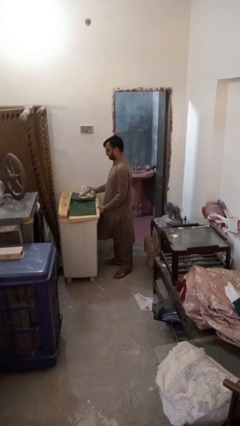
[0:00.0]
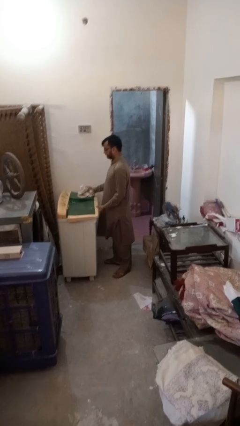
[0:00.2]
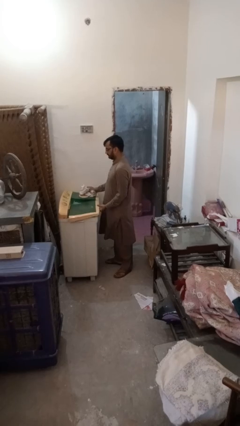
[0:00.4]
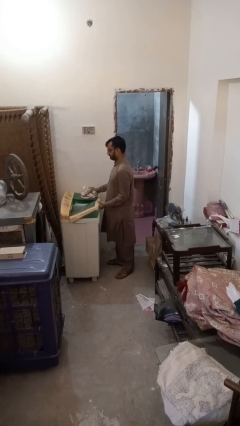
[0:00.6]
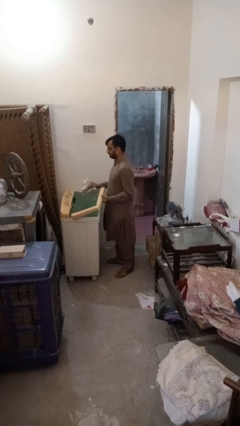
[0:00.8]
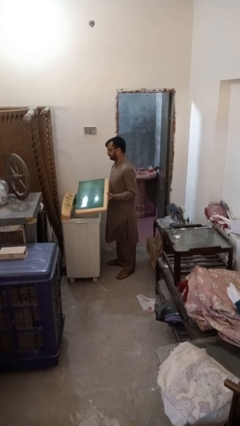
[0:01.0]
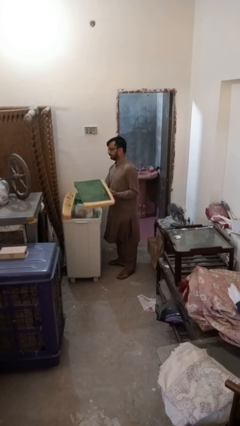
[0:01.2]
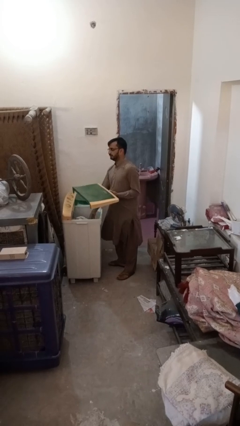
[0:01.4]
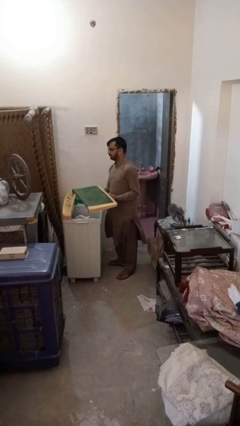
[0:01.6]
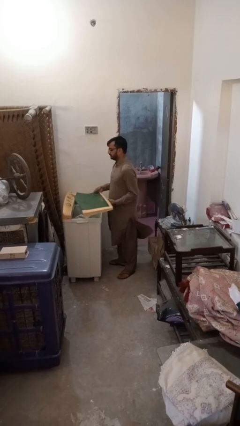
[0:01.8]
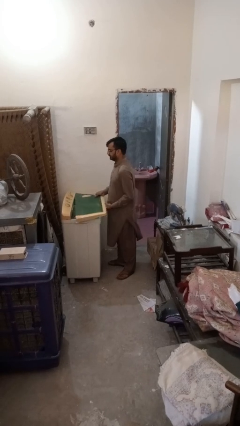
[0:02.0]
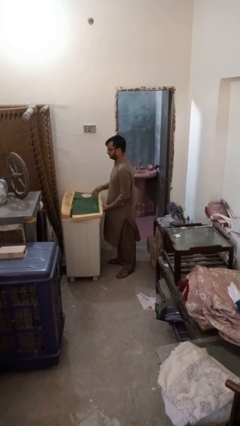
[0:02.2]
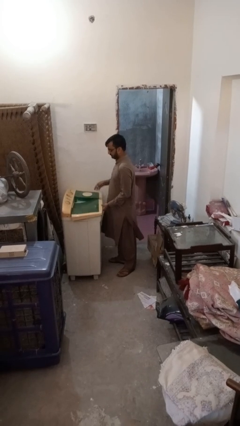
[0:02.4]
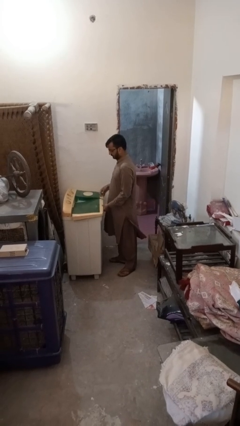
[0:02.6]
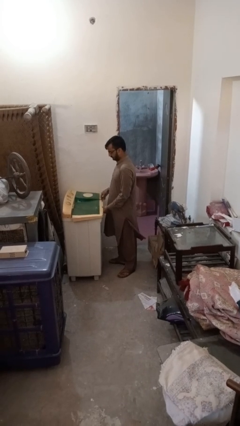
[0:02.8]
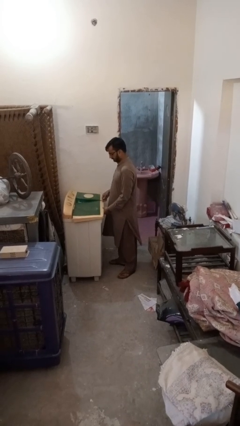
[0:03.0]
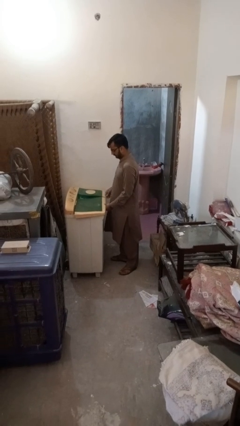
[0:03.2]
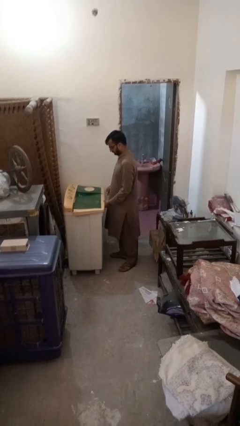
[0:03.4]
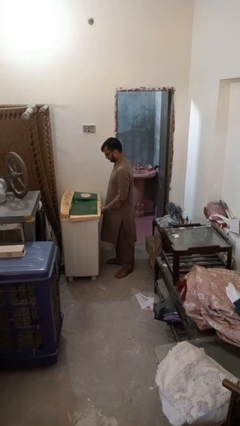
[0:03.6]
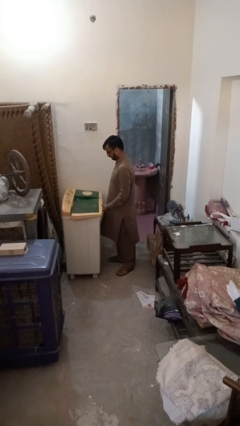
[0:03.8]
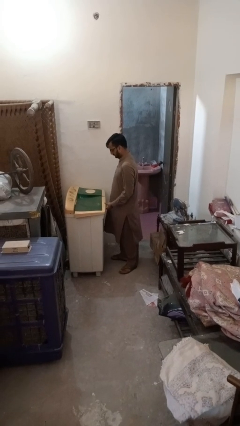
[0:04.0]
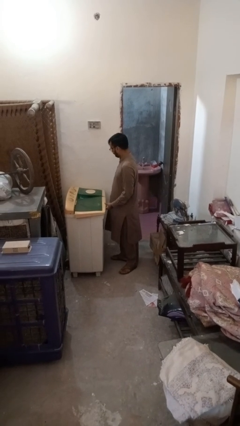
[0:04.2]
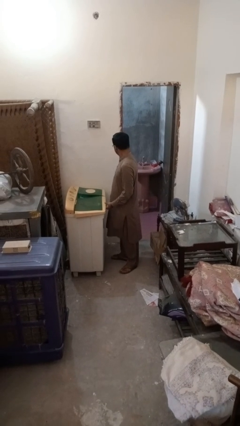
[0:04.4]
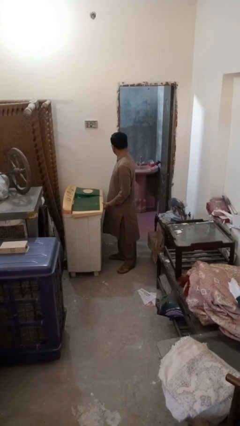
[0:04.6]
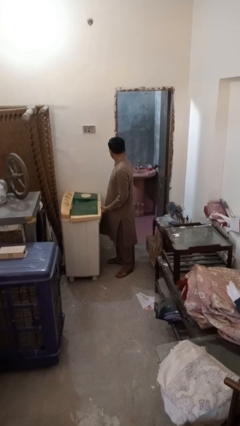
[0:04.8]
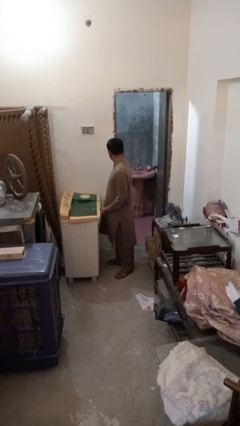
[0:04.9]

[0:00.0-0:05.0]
person loads clotheswasher

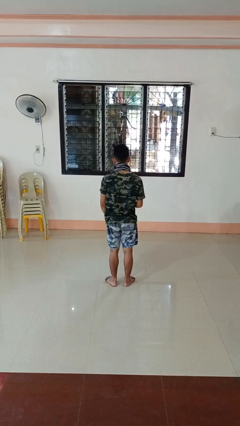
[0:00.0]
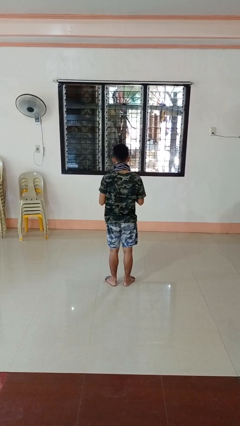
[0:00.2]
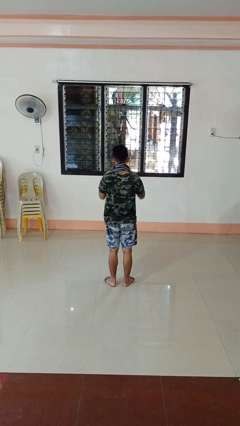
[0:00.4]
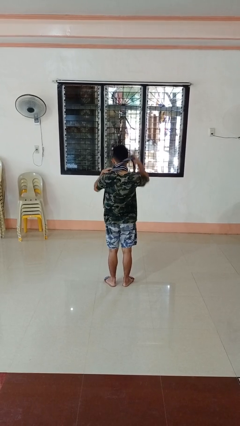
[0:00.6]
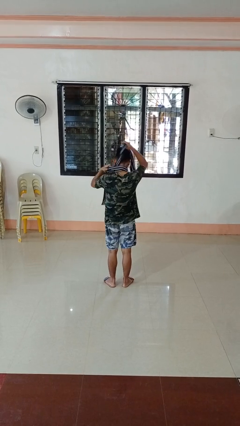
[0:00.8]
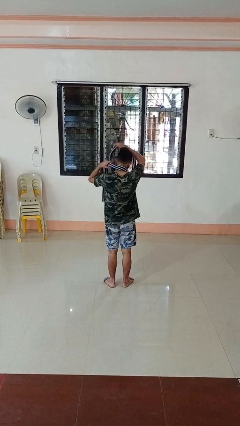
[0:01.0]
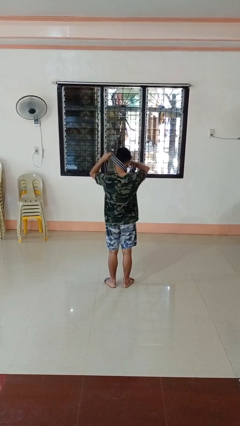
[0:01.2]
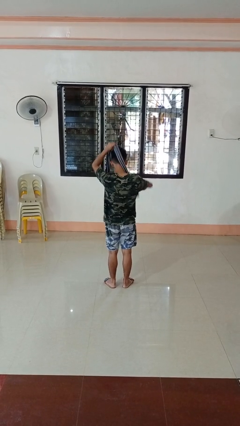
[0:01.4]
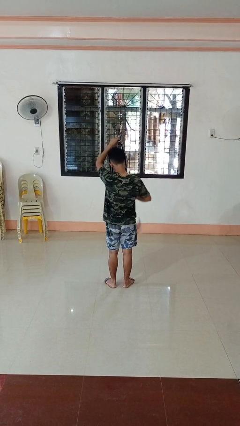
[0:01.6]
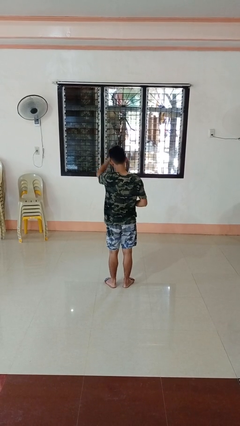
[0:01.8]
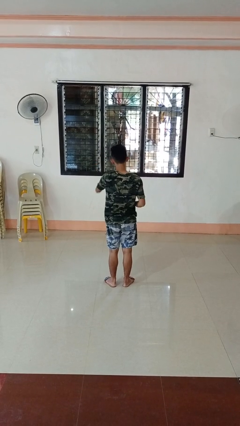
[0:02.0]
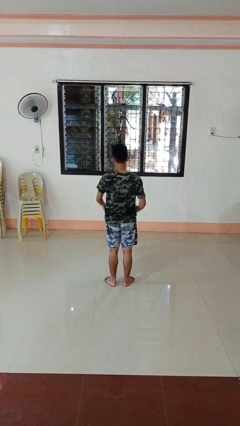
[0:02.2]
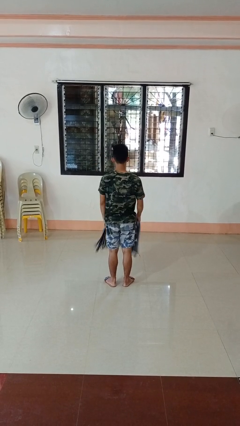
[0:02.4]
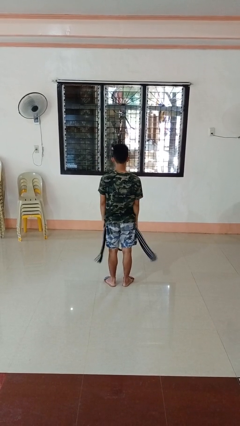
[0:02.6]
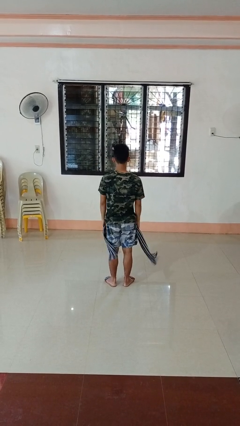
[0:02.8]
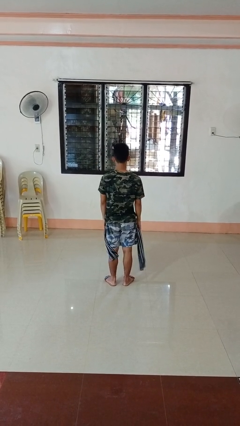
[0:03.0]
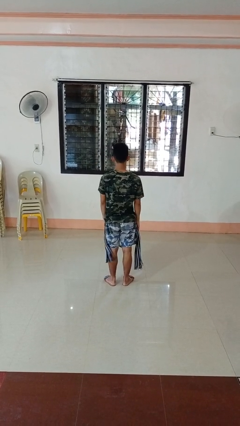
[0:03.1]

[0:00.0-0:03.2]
person takes off scarf

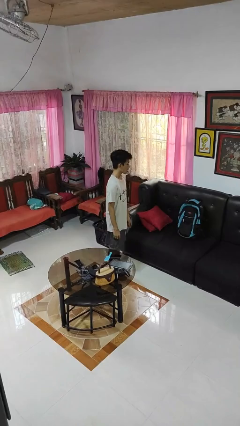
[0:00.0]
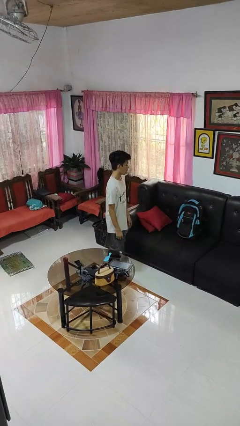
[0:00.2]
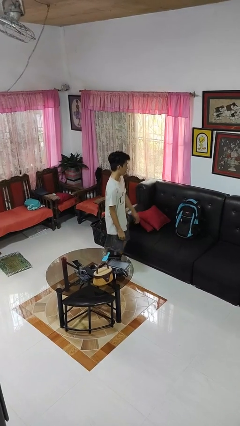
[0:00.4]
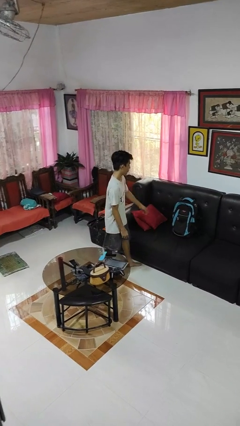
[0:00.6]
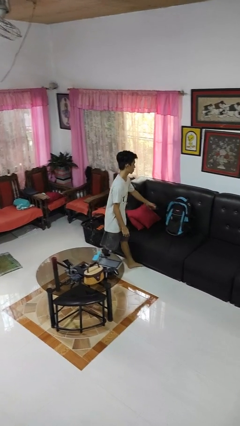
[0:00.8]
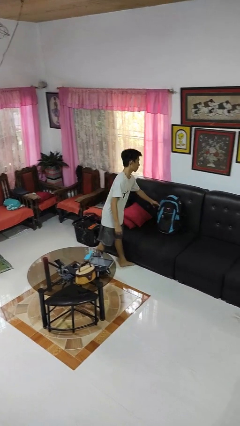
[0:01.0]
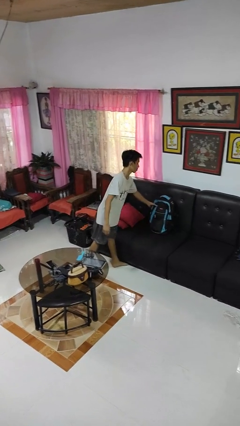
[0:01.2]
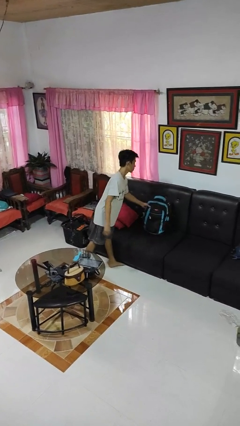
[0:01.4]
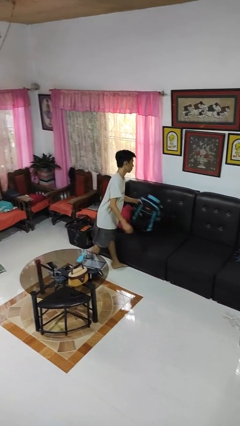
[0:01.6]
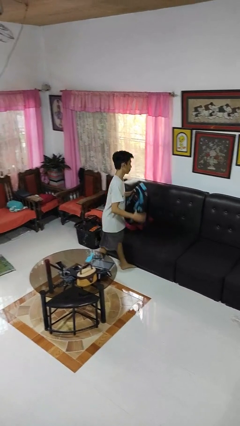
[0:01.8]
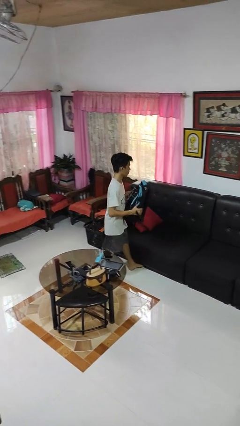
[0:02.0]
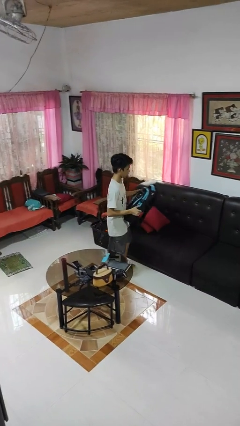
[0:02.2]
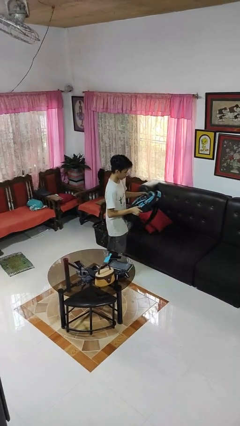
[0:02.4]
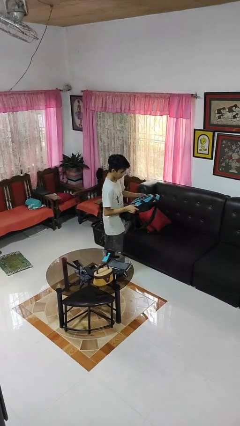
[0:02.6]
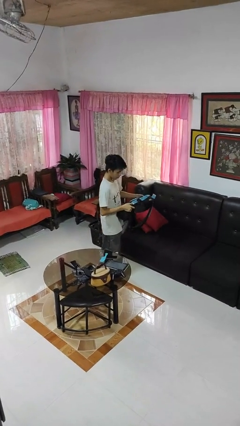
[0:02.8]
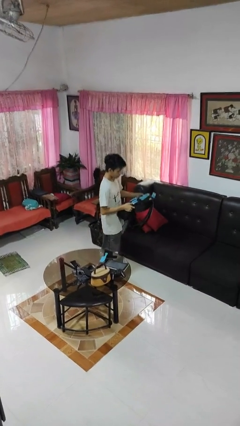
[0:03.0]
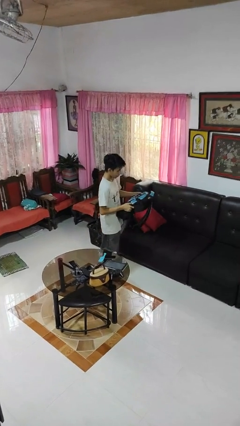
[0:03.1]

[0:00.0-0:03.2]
person picks up object from couch

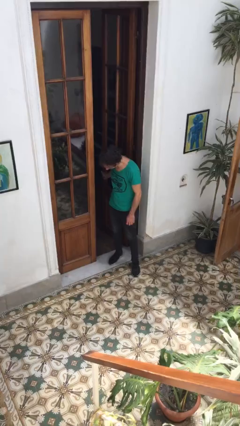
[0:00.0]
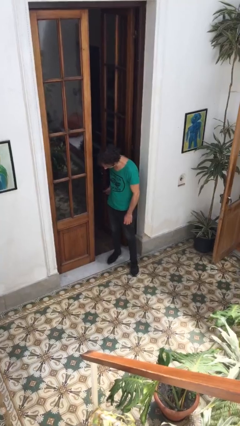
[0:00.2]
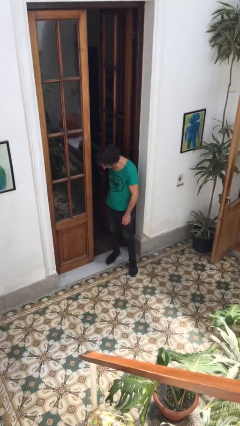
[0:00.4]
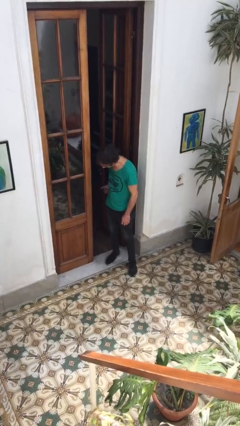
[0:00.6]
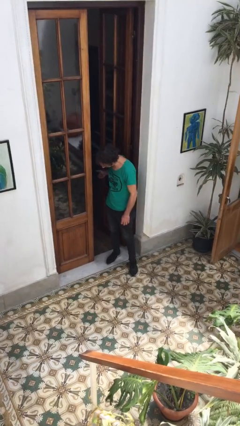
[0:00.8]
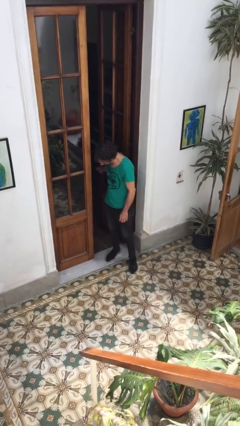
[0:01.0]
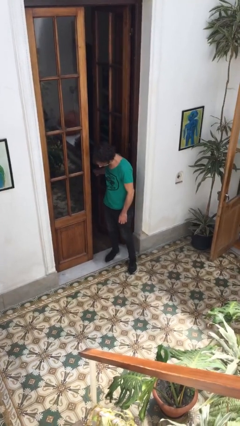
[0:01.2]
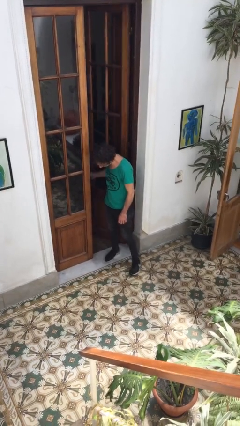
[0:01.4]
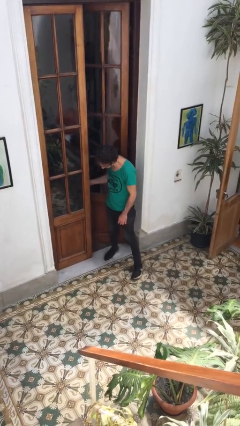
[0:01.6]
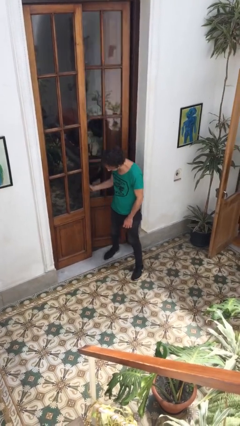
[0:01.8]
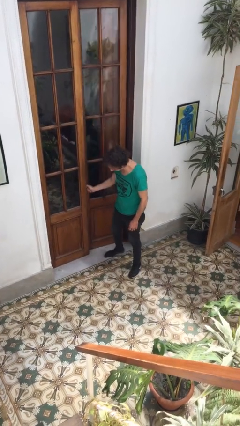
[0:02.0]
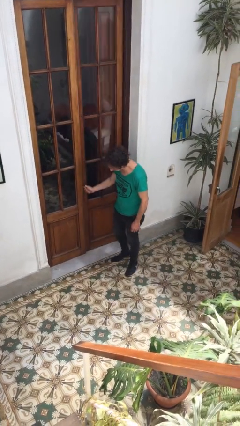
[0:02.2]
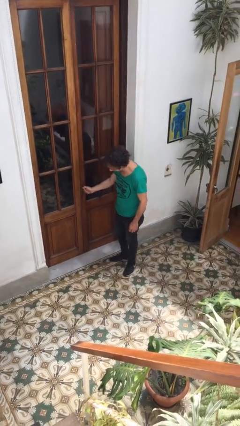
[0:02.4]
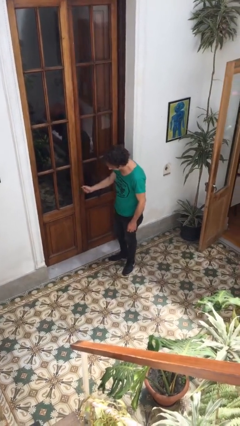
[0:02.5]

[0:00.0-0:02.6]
person closes facility door

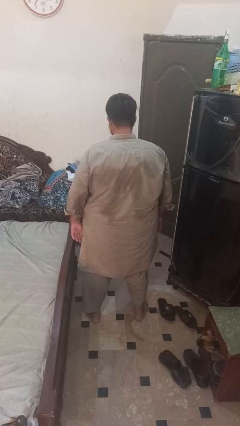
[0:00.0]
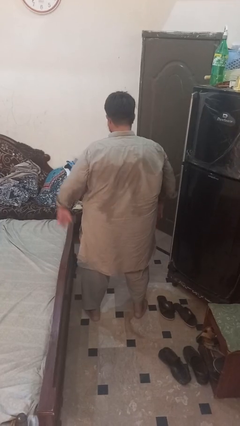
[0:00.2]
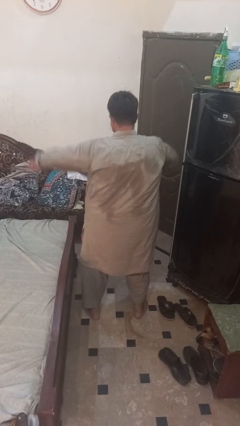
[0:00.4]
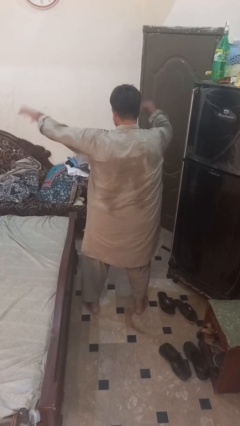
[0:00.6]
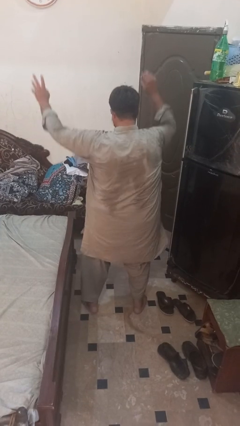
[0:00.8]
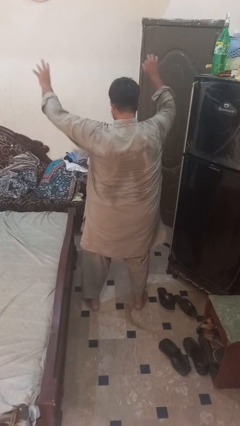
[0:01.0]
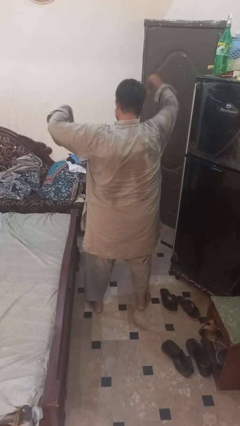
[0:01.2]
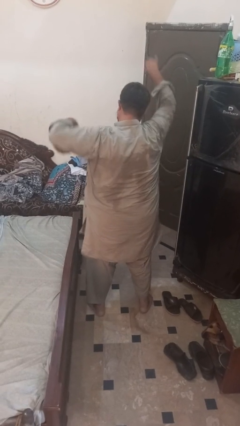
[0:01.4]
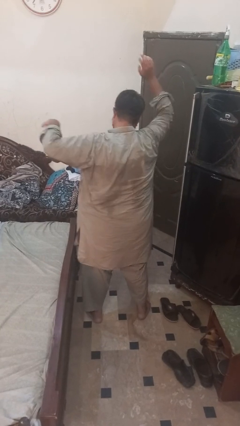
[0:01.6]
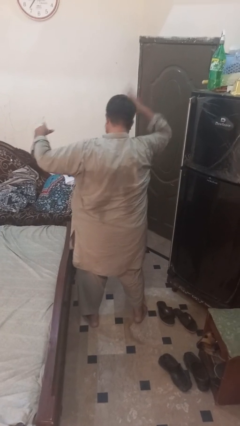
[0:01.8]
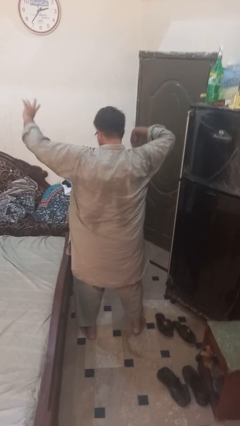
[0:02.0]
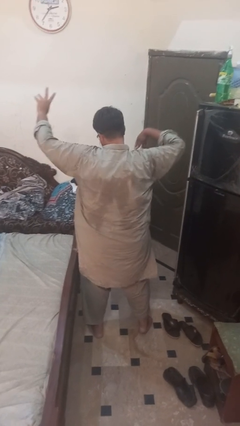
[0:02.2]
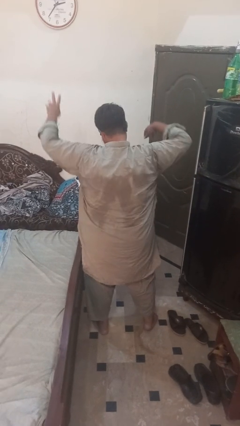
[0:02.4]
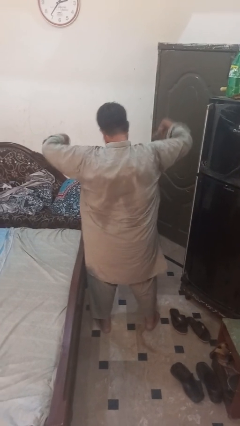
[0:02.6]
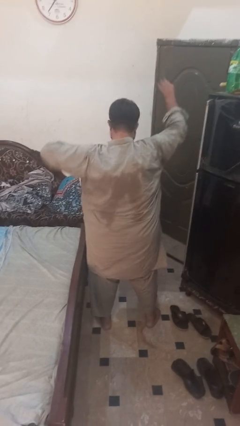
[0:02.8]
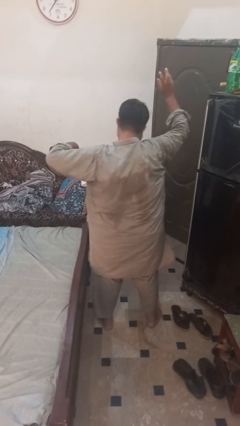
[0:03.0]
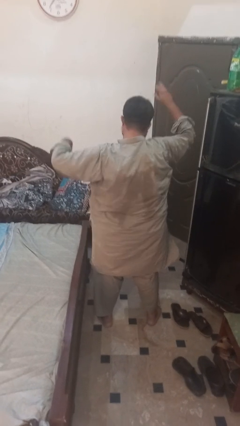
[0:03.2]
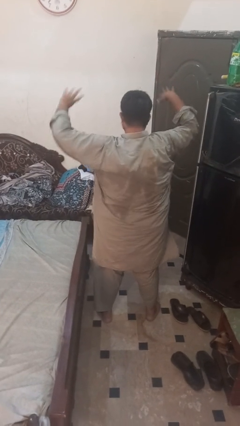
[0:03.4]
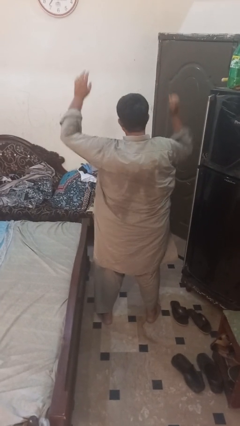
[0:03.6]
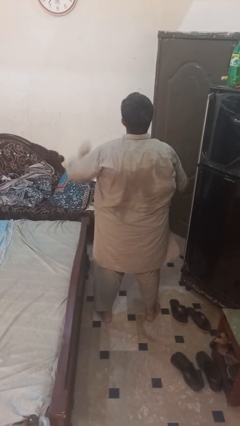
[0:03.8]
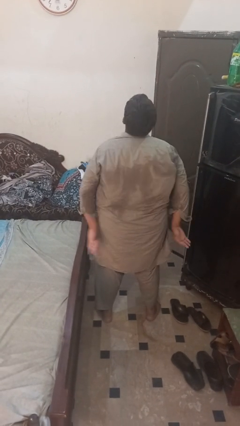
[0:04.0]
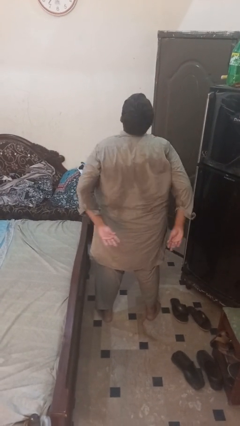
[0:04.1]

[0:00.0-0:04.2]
person dances in place
